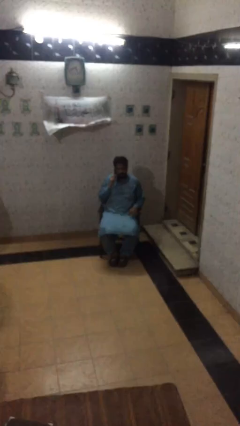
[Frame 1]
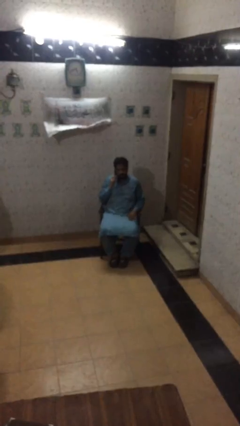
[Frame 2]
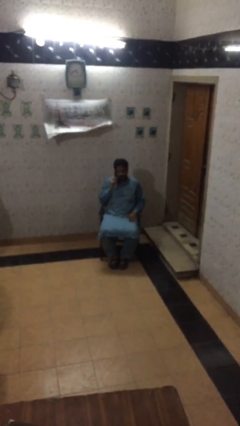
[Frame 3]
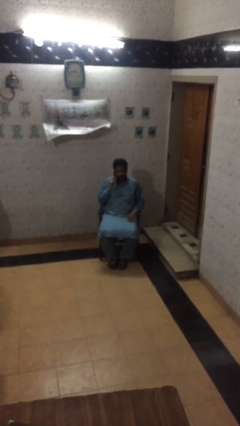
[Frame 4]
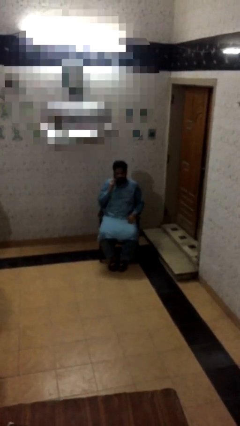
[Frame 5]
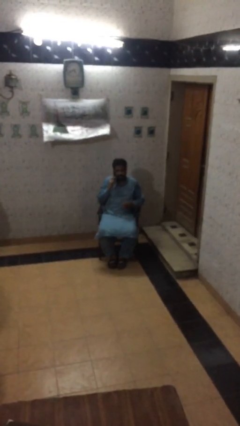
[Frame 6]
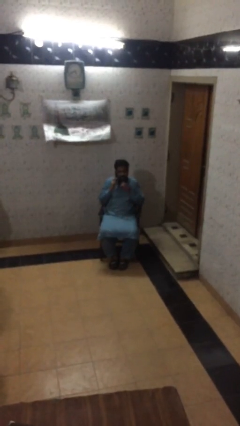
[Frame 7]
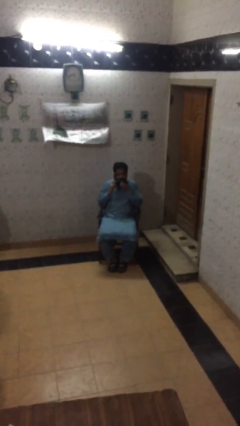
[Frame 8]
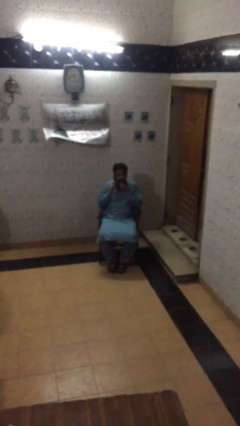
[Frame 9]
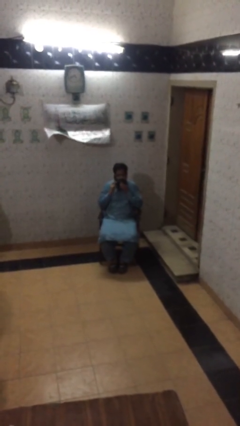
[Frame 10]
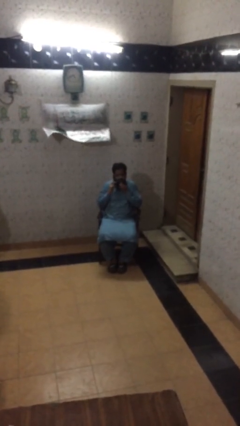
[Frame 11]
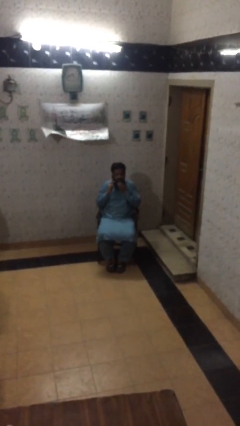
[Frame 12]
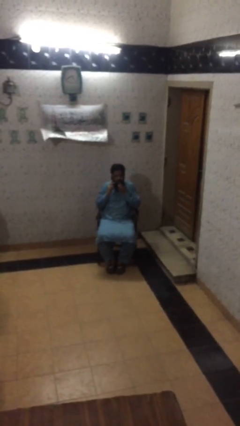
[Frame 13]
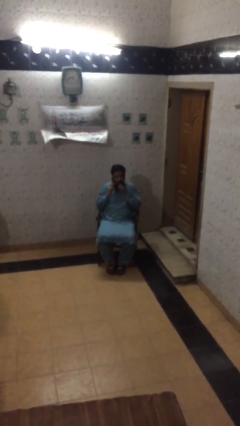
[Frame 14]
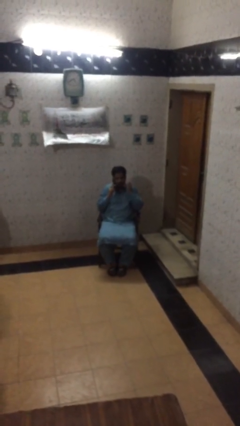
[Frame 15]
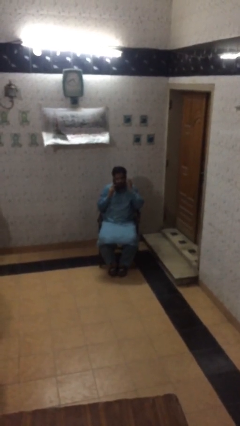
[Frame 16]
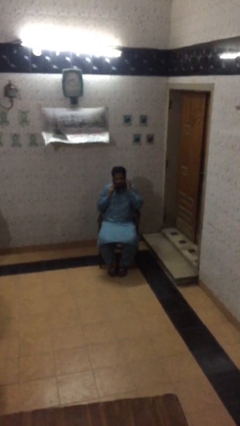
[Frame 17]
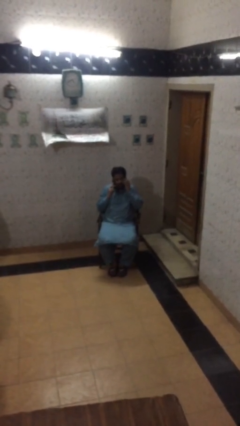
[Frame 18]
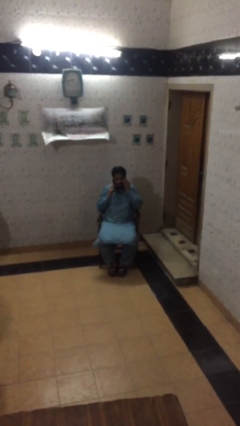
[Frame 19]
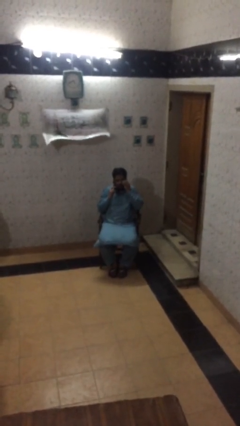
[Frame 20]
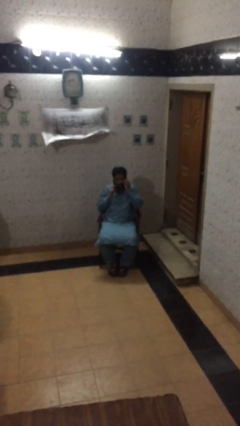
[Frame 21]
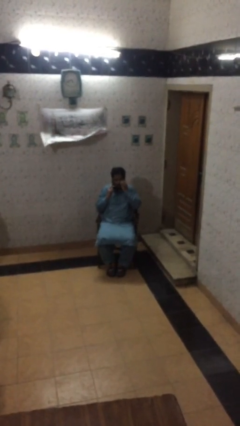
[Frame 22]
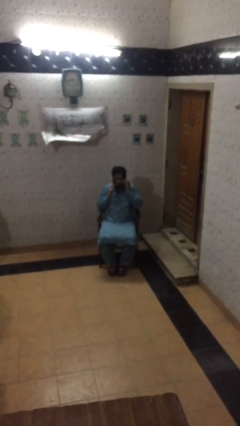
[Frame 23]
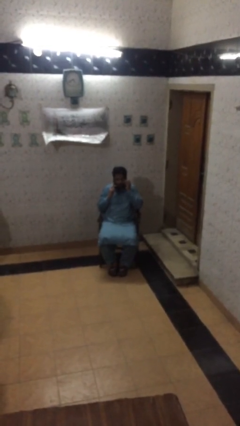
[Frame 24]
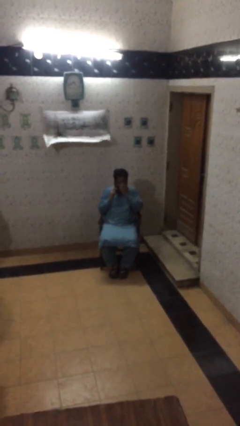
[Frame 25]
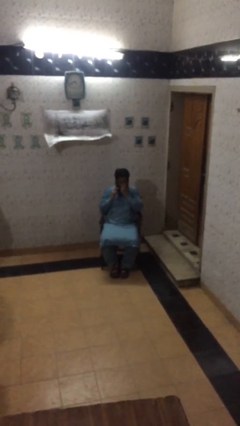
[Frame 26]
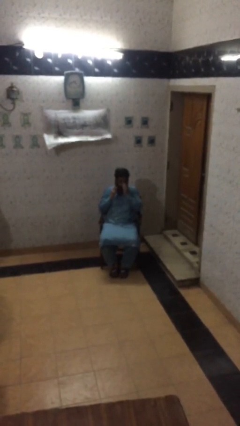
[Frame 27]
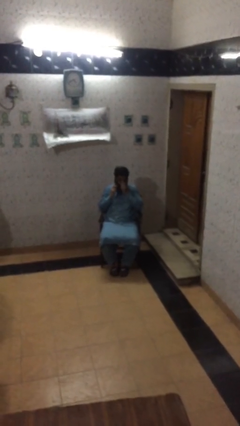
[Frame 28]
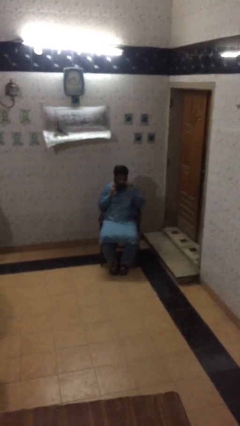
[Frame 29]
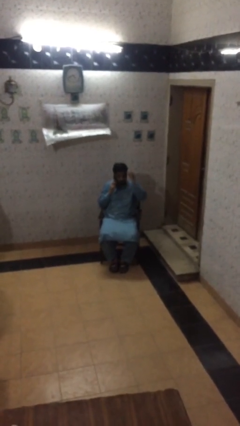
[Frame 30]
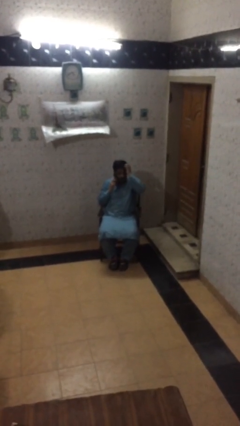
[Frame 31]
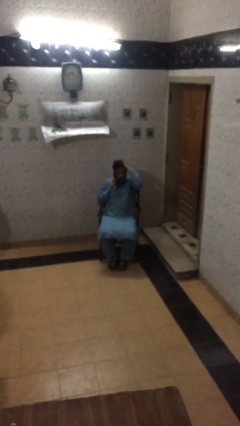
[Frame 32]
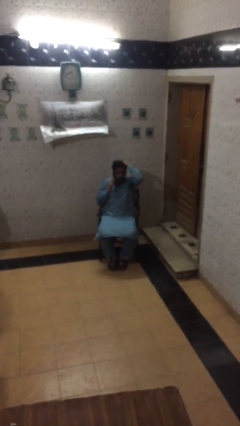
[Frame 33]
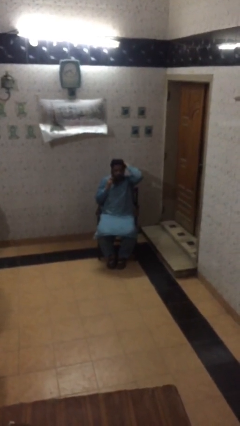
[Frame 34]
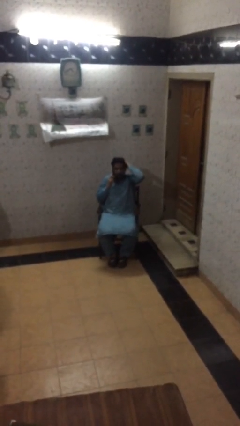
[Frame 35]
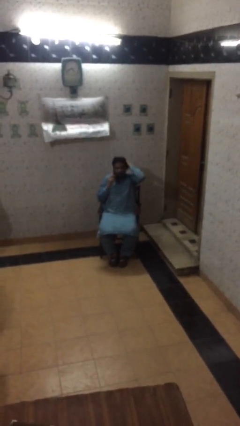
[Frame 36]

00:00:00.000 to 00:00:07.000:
person talks on phone

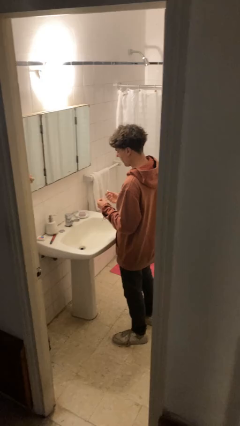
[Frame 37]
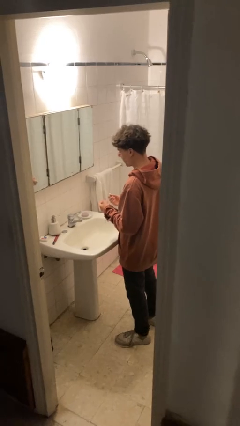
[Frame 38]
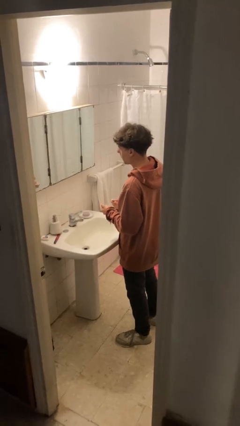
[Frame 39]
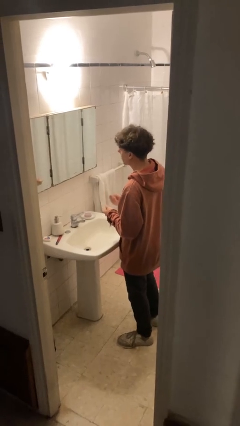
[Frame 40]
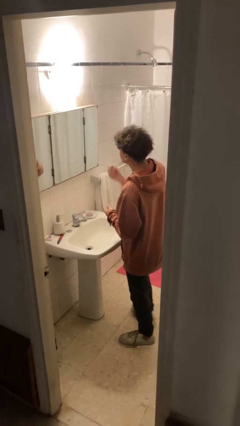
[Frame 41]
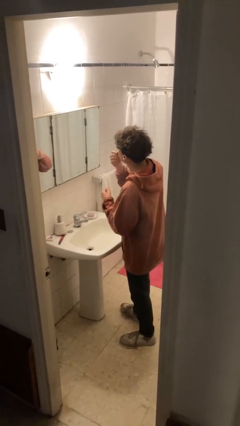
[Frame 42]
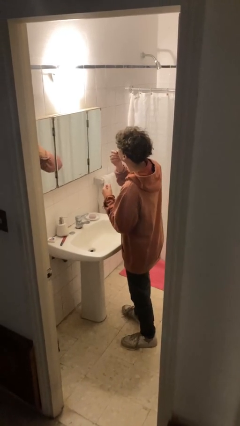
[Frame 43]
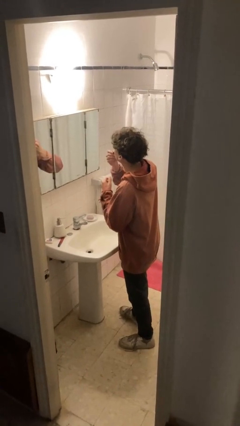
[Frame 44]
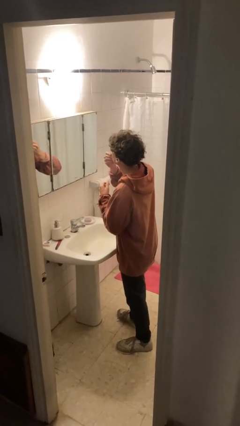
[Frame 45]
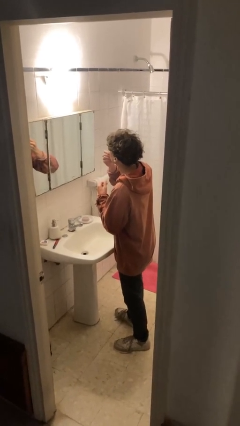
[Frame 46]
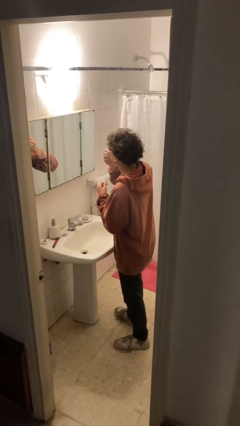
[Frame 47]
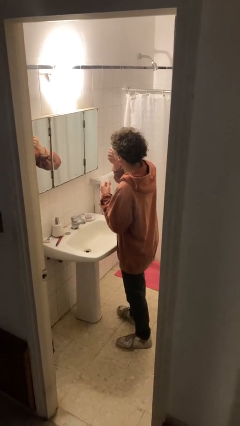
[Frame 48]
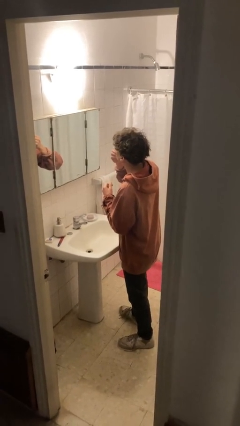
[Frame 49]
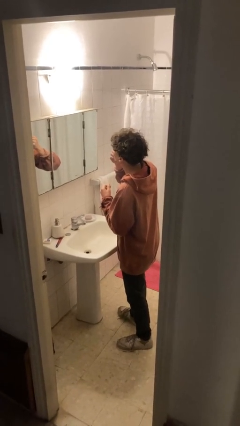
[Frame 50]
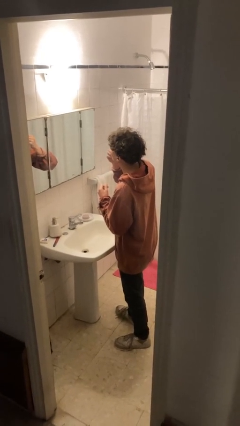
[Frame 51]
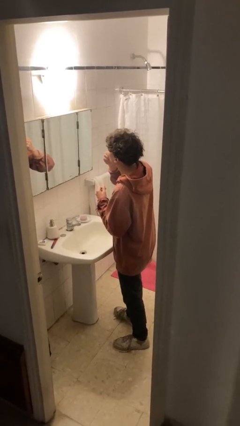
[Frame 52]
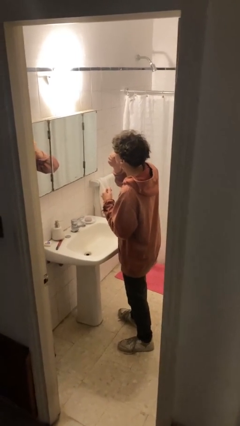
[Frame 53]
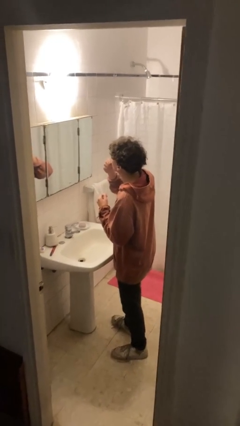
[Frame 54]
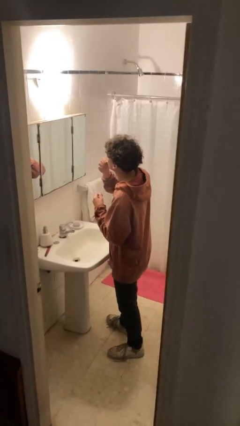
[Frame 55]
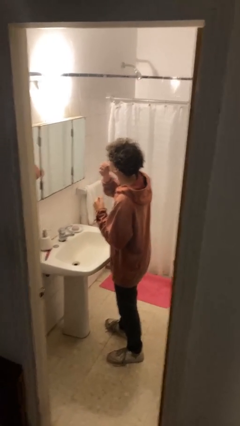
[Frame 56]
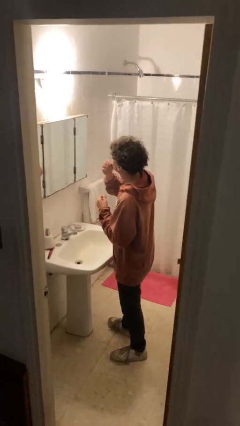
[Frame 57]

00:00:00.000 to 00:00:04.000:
person applies lip makeup

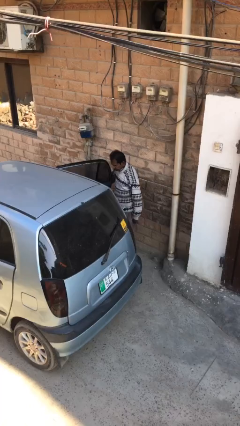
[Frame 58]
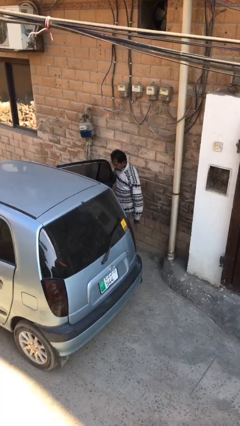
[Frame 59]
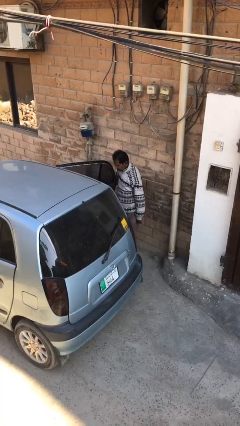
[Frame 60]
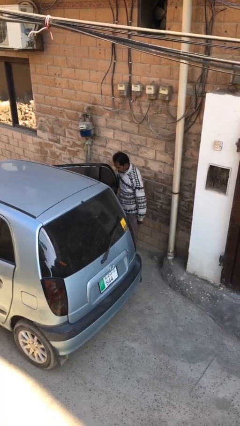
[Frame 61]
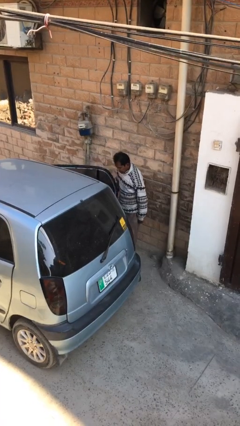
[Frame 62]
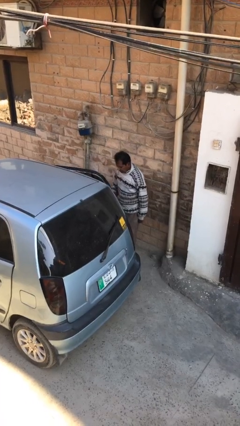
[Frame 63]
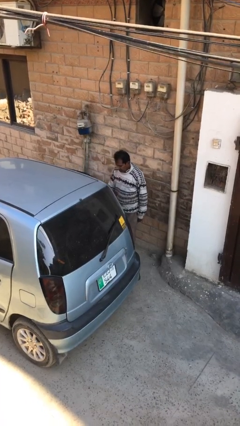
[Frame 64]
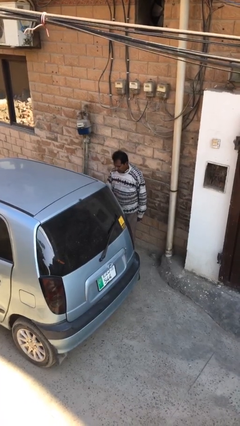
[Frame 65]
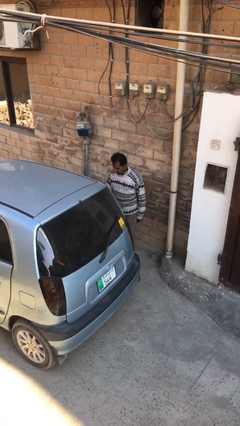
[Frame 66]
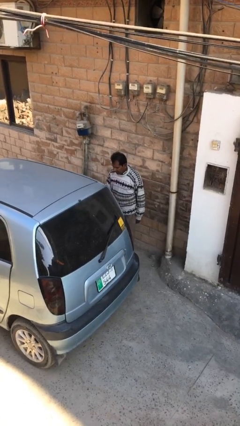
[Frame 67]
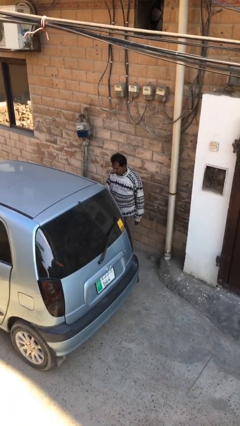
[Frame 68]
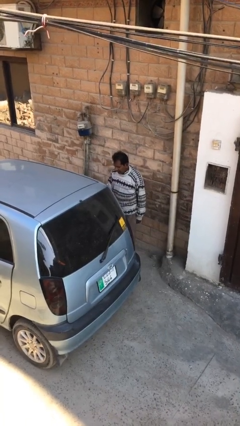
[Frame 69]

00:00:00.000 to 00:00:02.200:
person closes car door

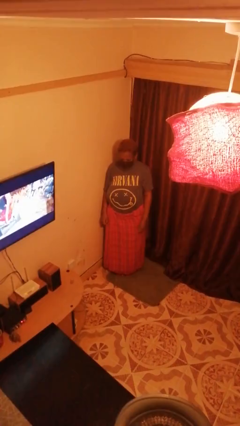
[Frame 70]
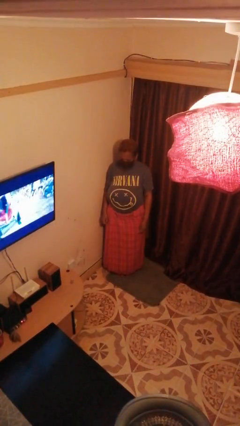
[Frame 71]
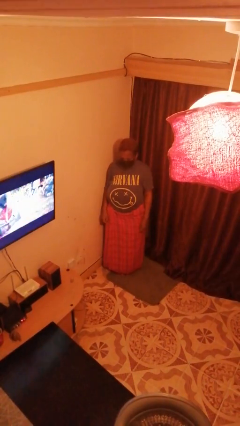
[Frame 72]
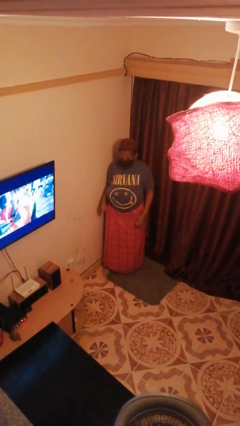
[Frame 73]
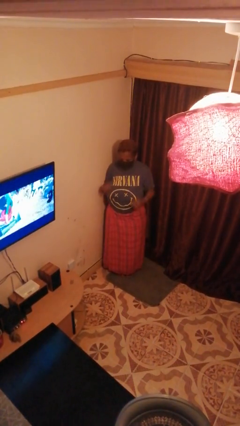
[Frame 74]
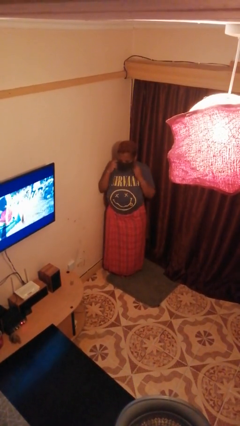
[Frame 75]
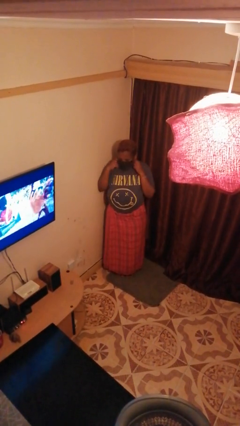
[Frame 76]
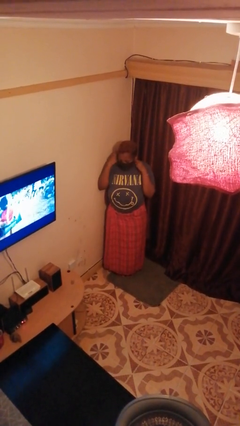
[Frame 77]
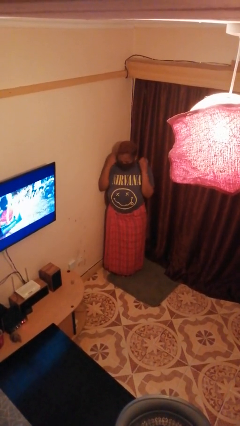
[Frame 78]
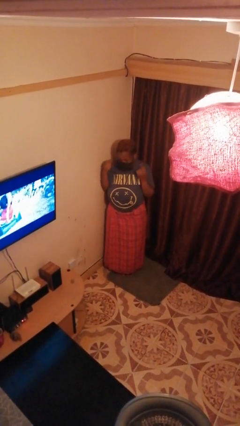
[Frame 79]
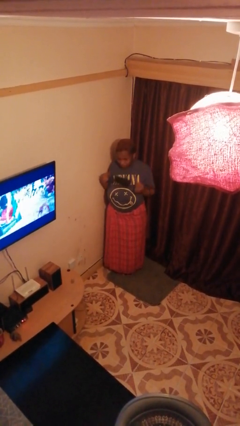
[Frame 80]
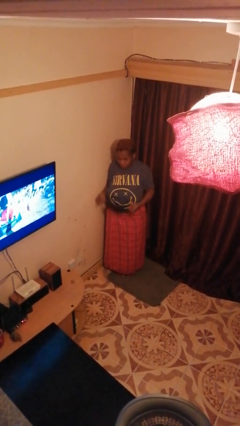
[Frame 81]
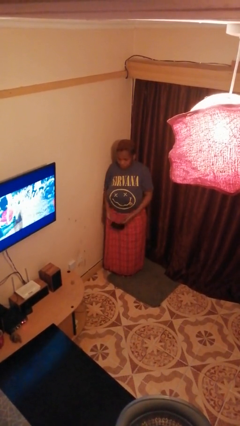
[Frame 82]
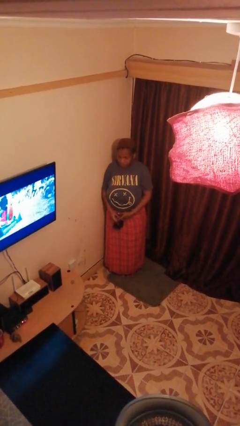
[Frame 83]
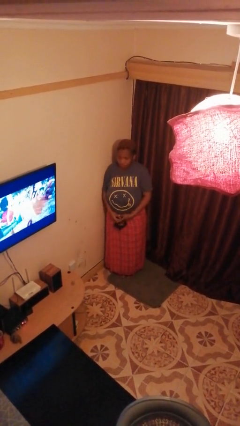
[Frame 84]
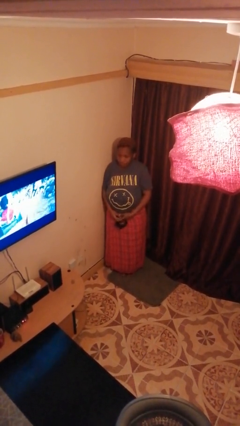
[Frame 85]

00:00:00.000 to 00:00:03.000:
person takes off facemask

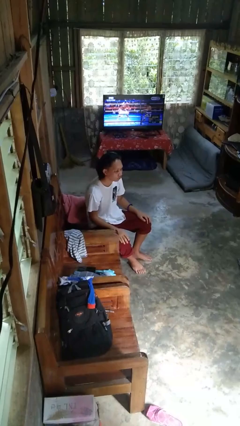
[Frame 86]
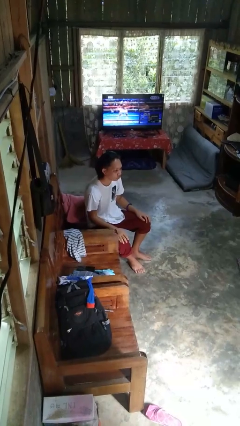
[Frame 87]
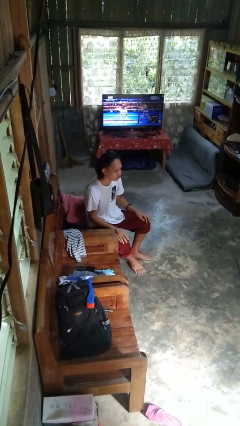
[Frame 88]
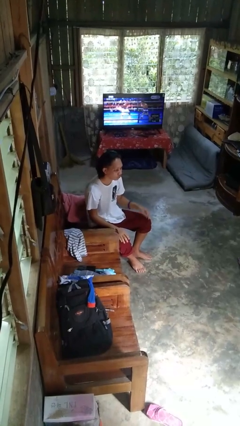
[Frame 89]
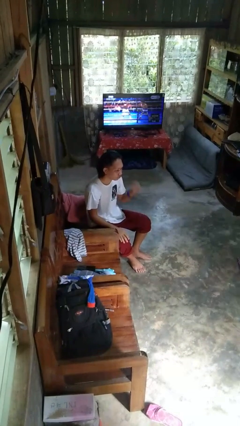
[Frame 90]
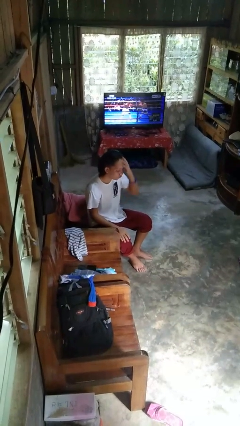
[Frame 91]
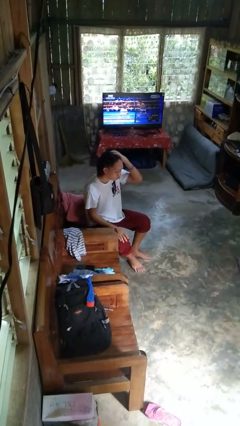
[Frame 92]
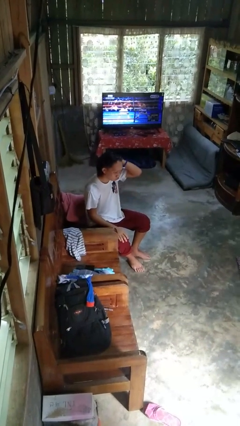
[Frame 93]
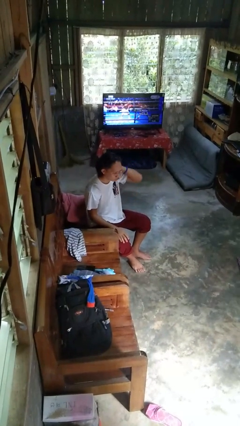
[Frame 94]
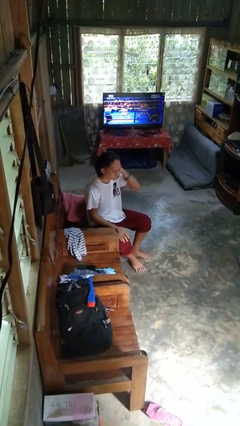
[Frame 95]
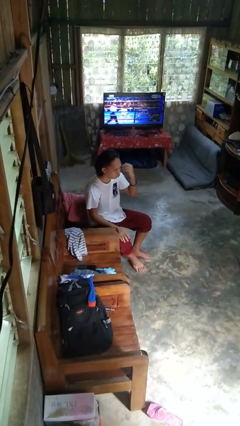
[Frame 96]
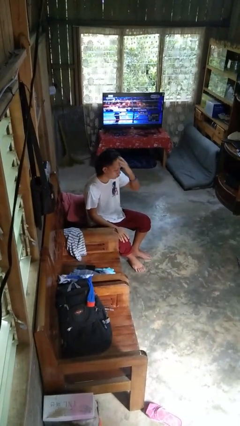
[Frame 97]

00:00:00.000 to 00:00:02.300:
person strokes hair
